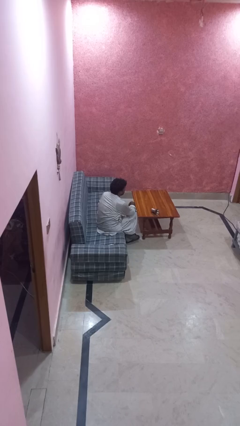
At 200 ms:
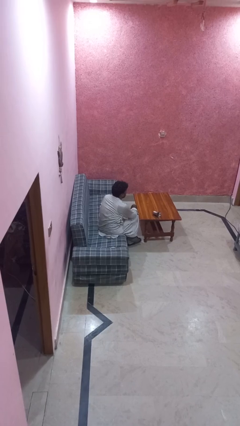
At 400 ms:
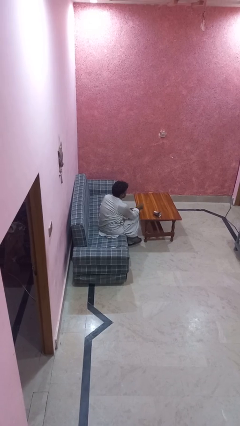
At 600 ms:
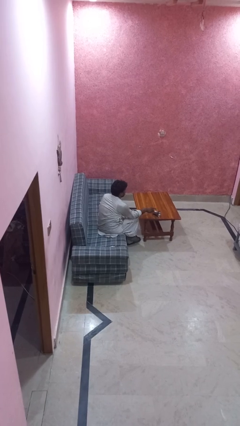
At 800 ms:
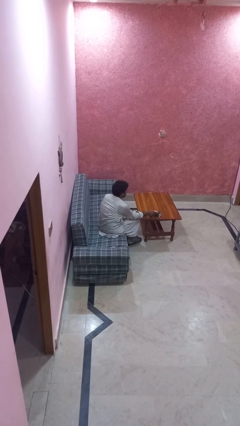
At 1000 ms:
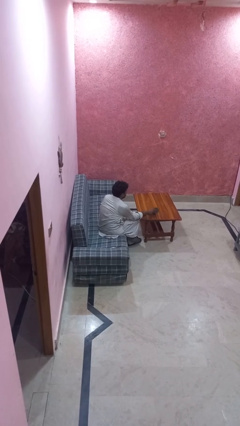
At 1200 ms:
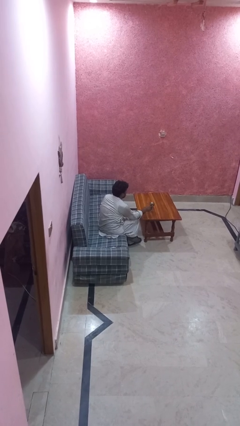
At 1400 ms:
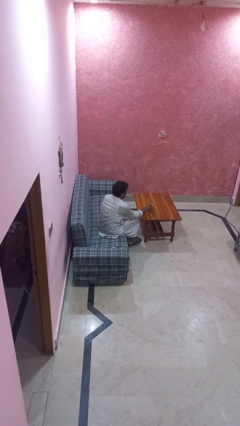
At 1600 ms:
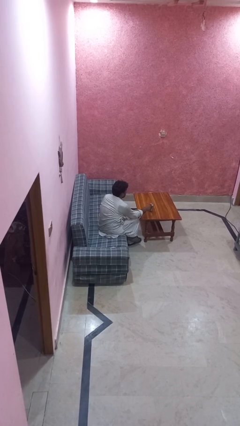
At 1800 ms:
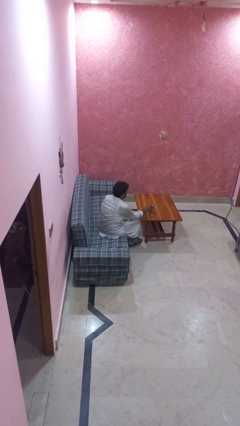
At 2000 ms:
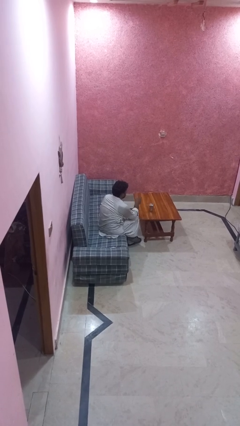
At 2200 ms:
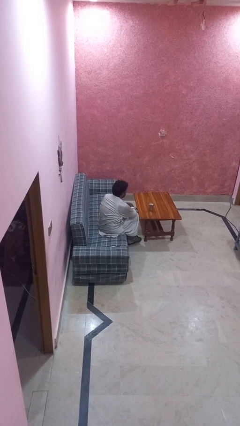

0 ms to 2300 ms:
person sets upright glass

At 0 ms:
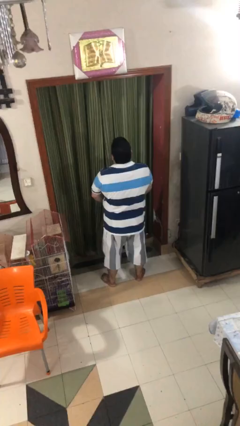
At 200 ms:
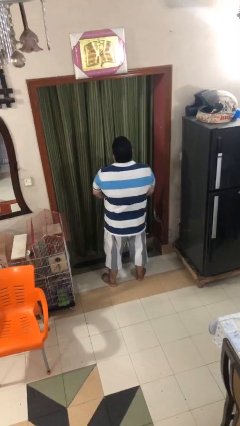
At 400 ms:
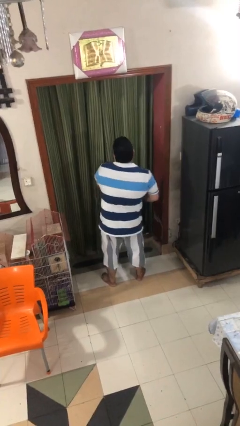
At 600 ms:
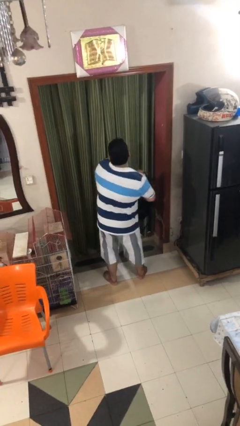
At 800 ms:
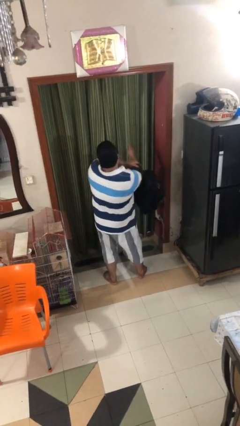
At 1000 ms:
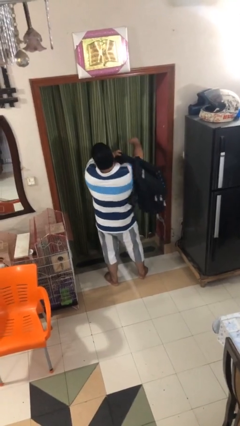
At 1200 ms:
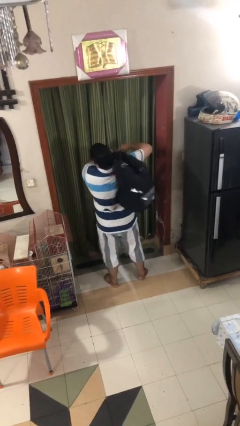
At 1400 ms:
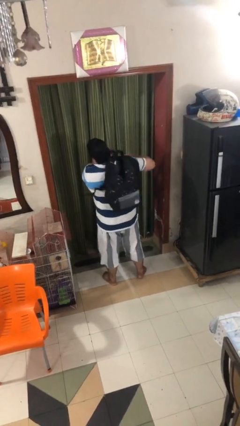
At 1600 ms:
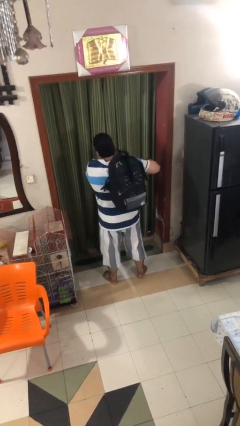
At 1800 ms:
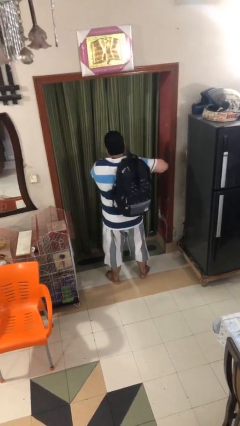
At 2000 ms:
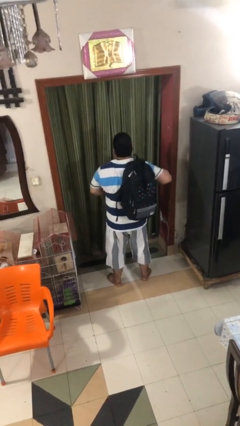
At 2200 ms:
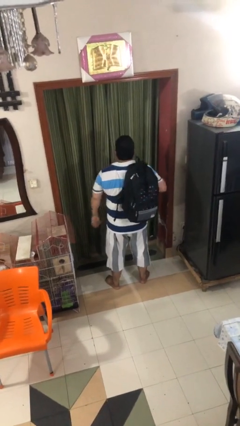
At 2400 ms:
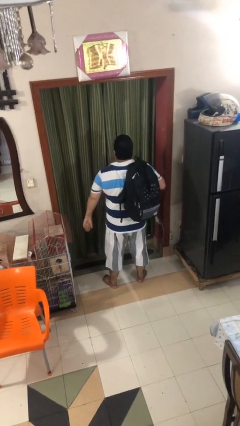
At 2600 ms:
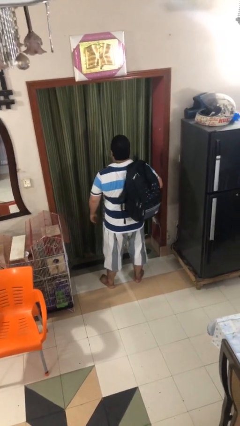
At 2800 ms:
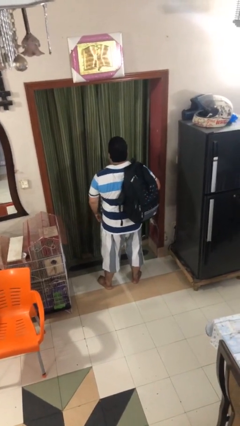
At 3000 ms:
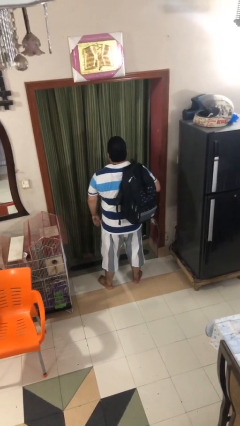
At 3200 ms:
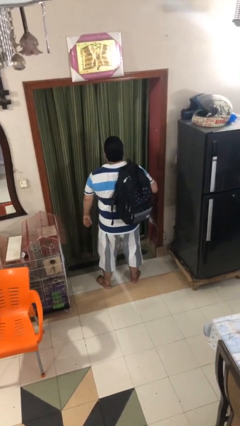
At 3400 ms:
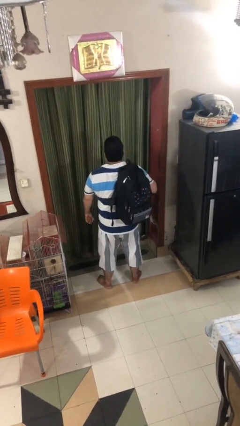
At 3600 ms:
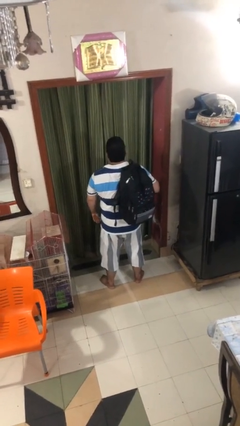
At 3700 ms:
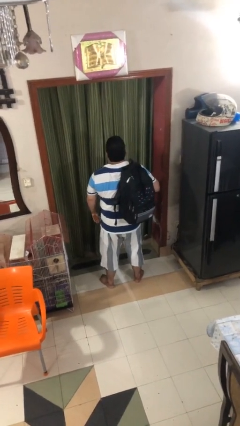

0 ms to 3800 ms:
person puts on backpack

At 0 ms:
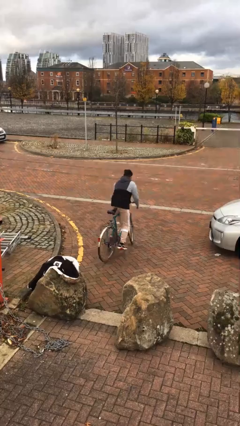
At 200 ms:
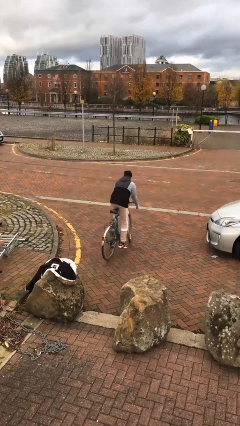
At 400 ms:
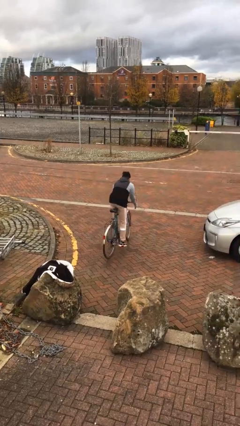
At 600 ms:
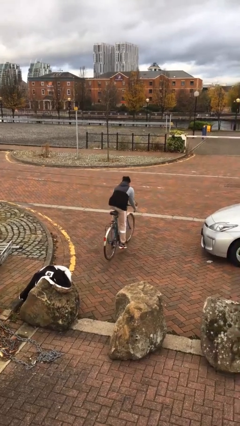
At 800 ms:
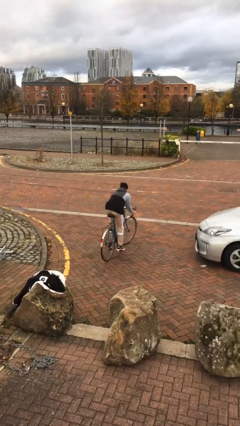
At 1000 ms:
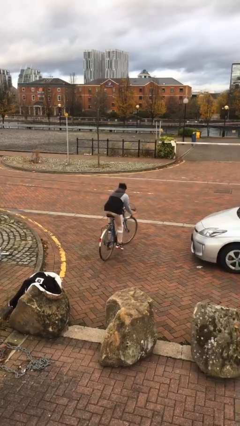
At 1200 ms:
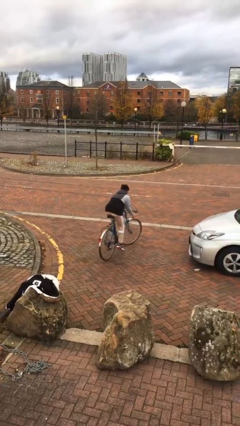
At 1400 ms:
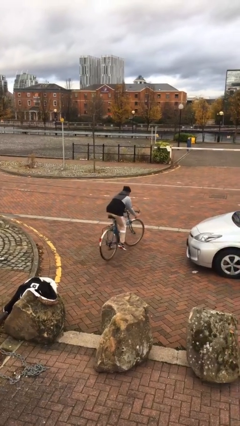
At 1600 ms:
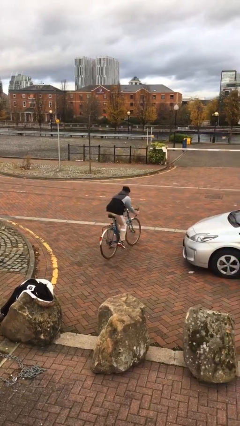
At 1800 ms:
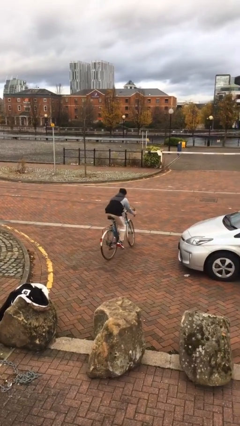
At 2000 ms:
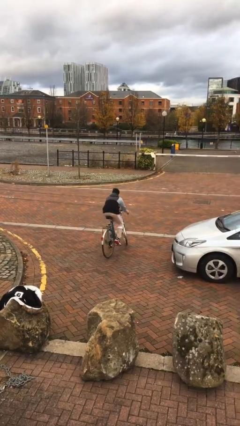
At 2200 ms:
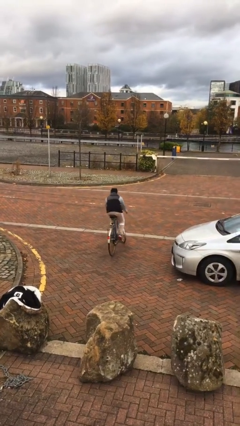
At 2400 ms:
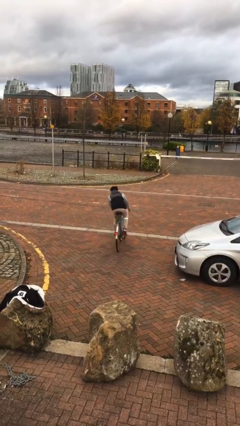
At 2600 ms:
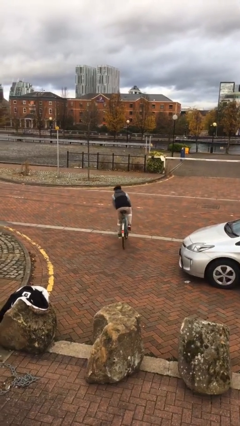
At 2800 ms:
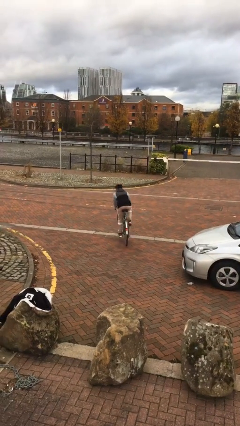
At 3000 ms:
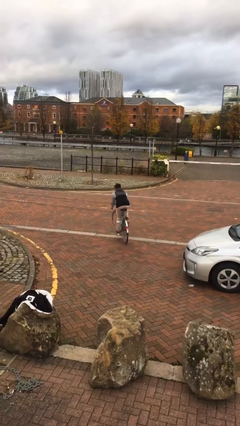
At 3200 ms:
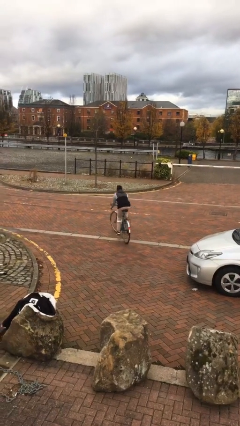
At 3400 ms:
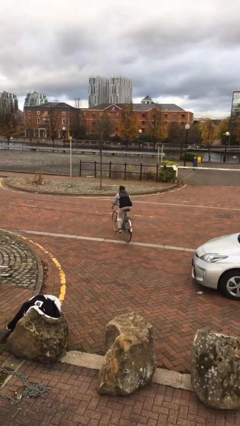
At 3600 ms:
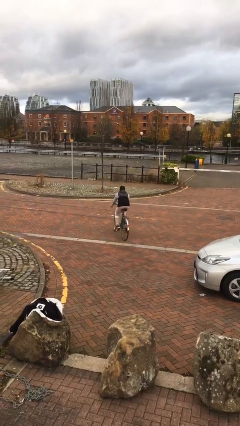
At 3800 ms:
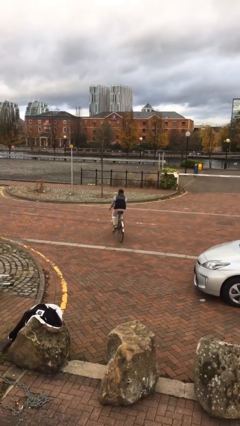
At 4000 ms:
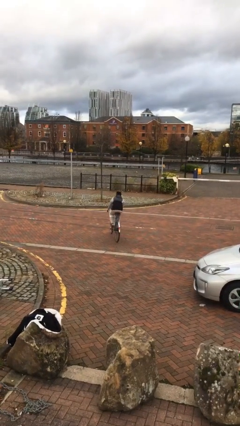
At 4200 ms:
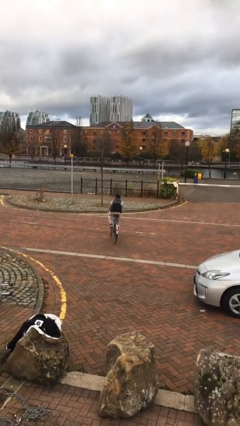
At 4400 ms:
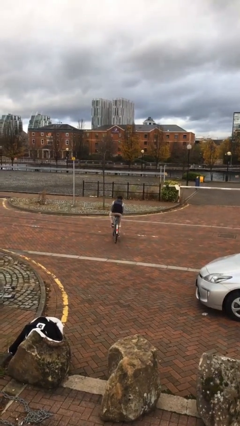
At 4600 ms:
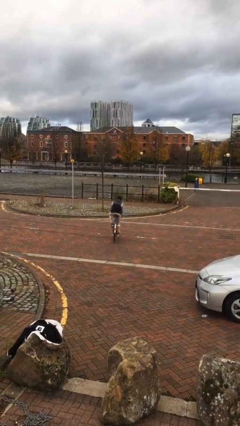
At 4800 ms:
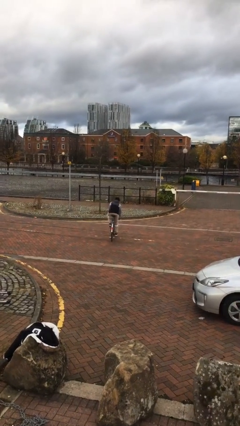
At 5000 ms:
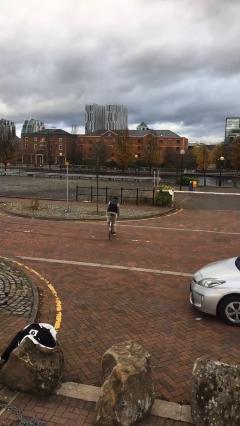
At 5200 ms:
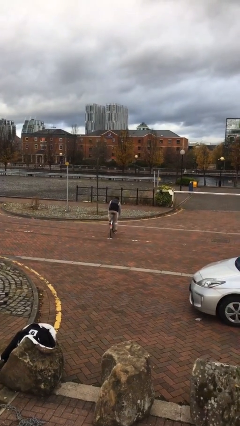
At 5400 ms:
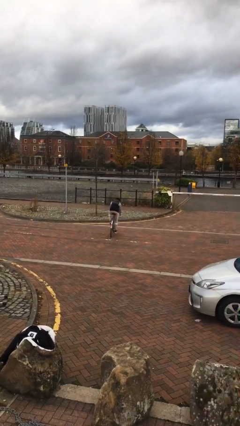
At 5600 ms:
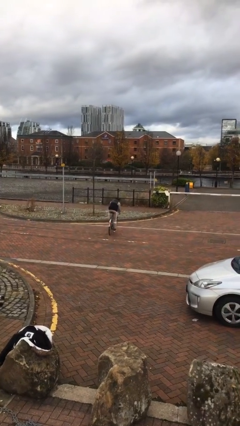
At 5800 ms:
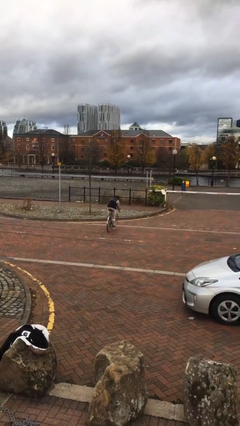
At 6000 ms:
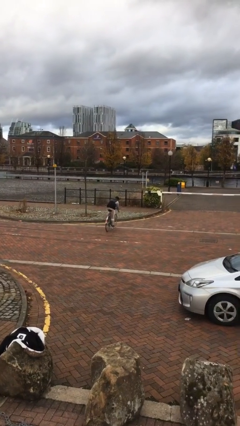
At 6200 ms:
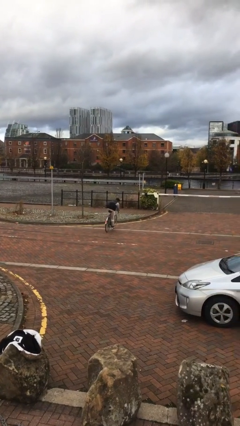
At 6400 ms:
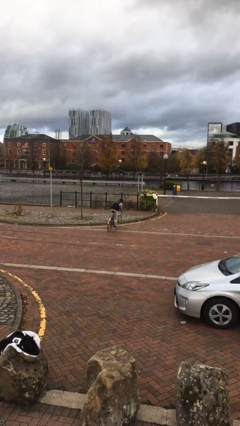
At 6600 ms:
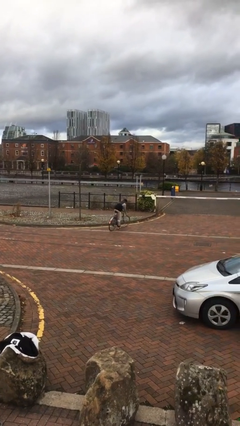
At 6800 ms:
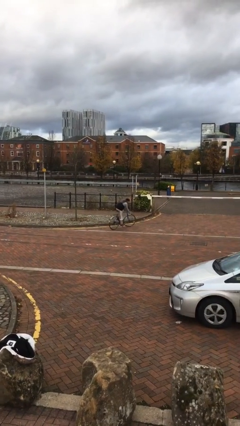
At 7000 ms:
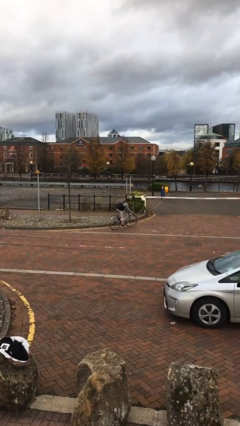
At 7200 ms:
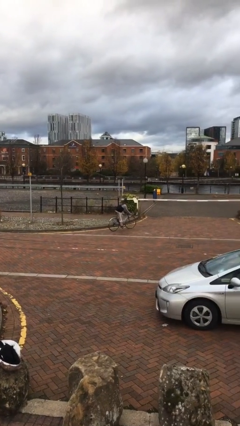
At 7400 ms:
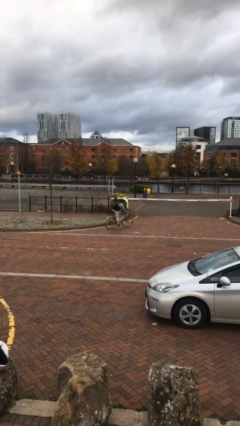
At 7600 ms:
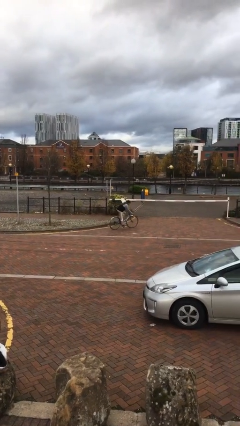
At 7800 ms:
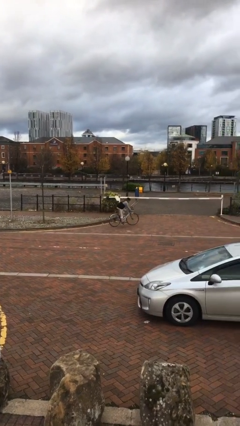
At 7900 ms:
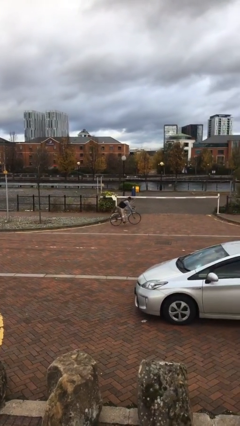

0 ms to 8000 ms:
person rides bicycle

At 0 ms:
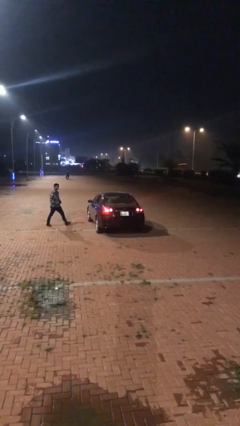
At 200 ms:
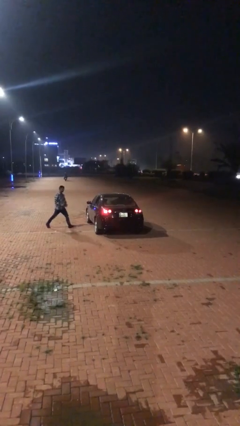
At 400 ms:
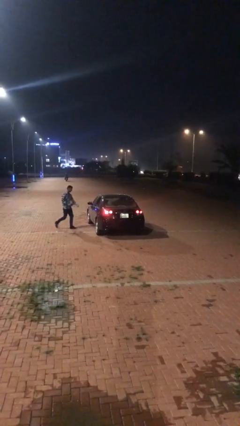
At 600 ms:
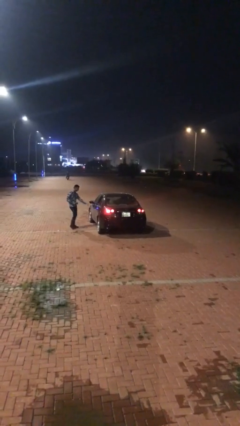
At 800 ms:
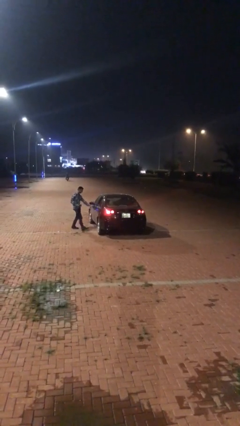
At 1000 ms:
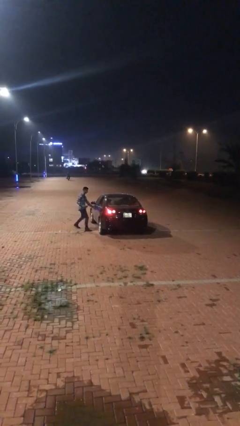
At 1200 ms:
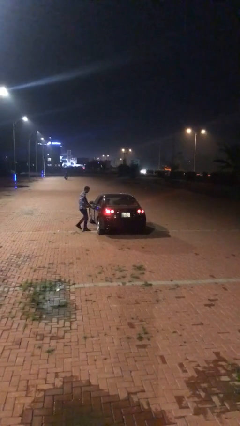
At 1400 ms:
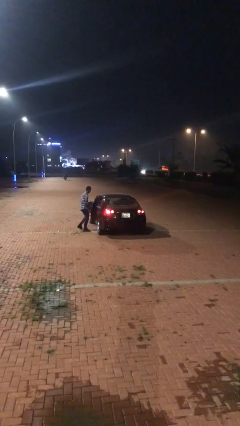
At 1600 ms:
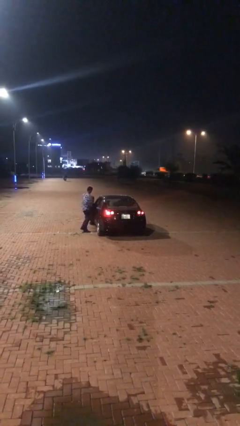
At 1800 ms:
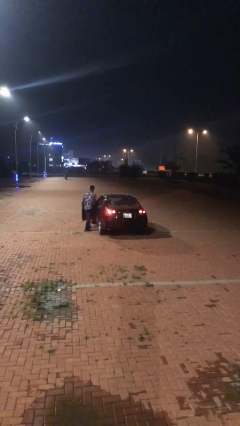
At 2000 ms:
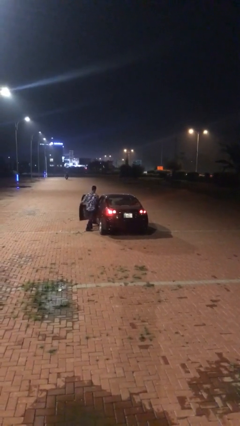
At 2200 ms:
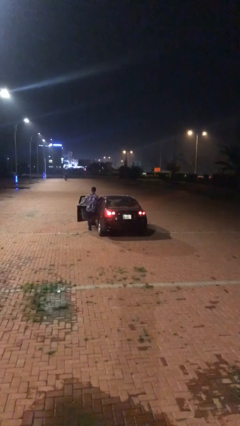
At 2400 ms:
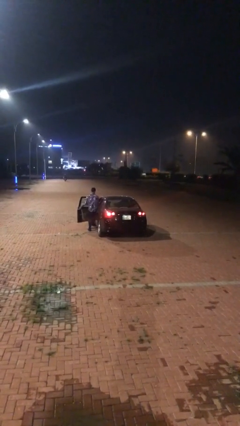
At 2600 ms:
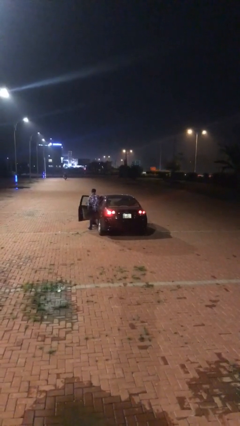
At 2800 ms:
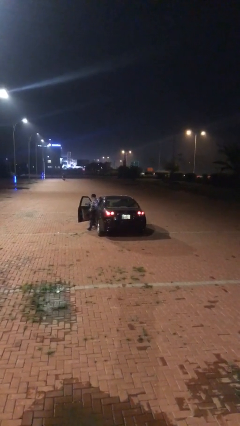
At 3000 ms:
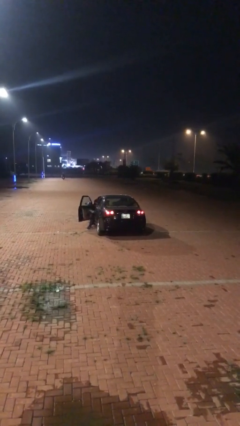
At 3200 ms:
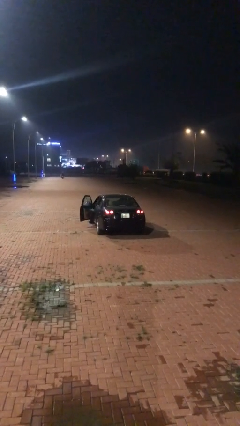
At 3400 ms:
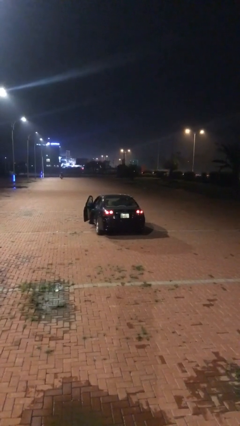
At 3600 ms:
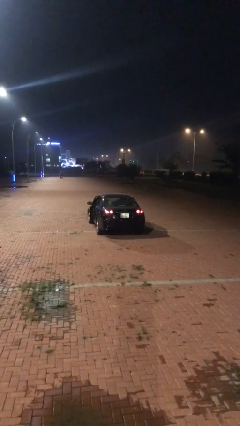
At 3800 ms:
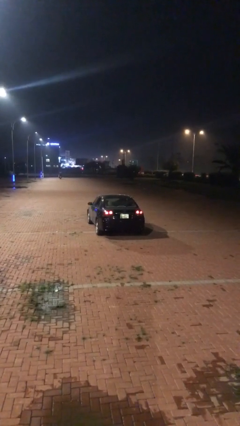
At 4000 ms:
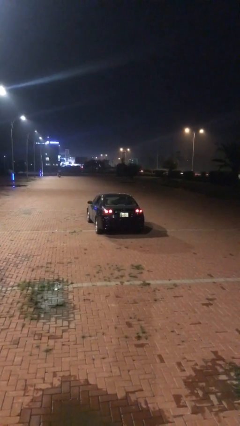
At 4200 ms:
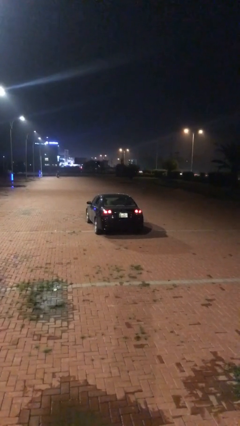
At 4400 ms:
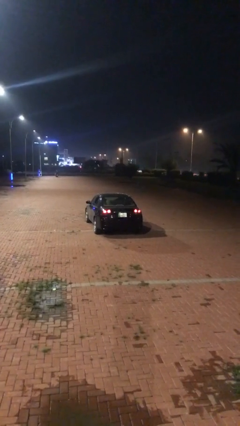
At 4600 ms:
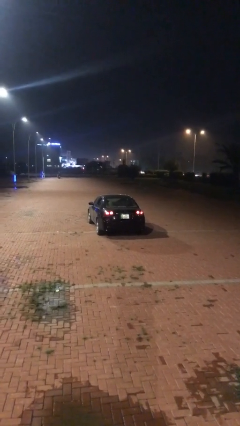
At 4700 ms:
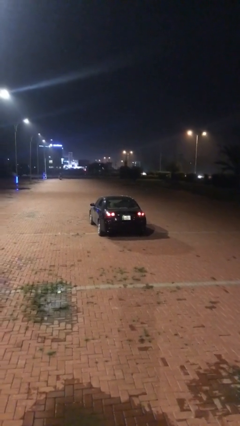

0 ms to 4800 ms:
car picks up person
